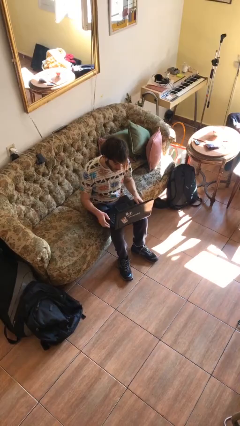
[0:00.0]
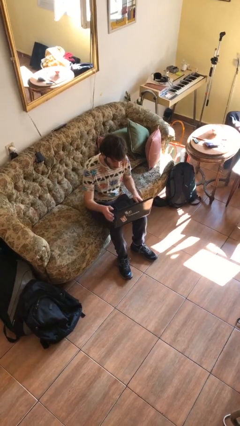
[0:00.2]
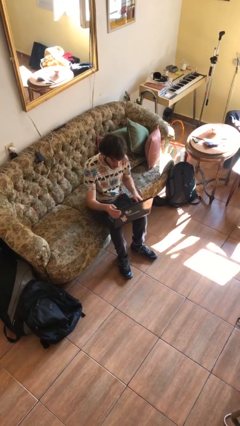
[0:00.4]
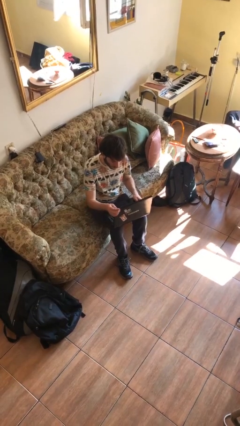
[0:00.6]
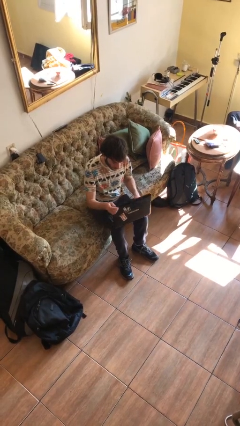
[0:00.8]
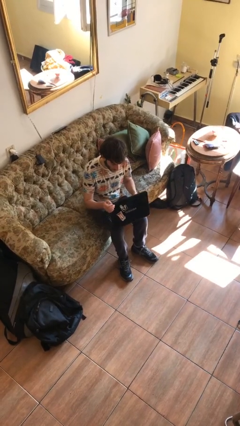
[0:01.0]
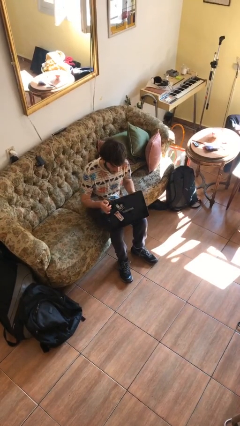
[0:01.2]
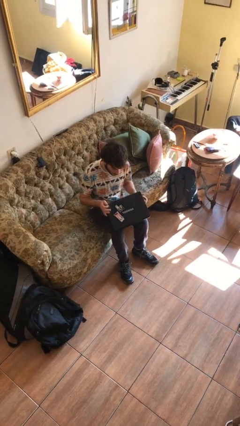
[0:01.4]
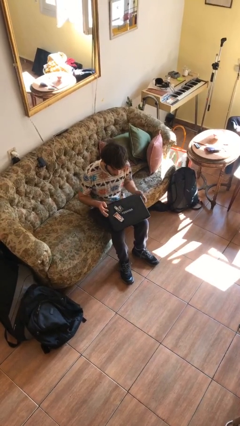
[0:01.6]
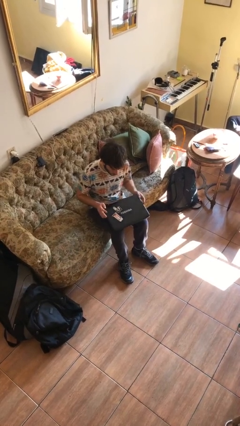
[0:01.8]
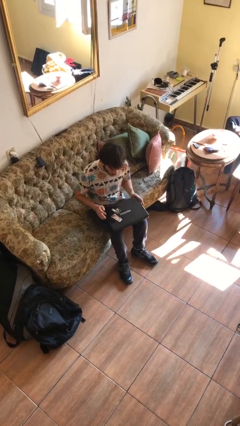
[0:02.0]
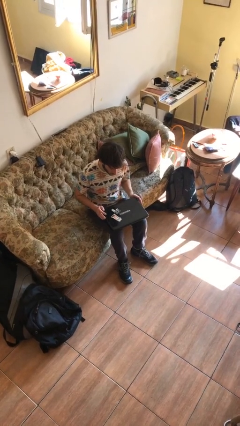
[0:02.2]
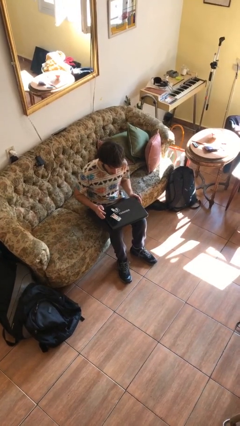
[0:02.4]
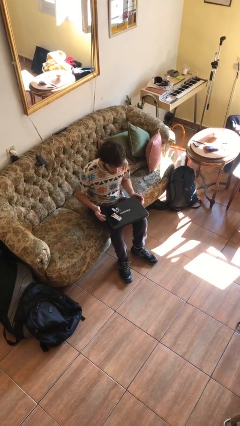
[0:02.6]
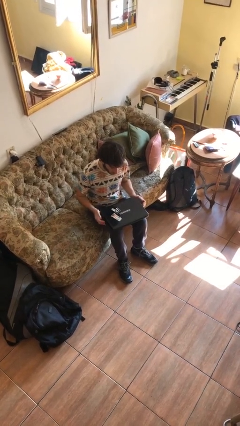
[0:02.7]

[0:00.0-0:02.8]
person closes laptop

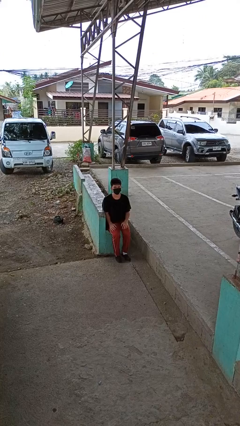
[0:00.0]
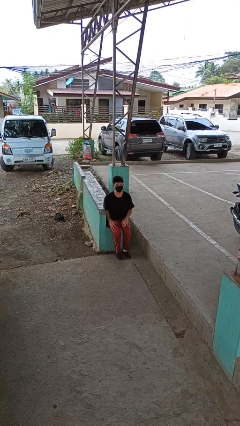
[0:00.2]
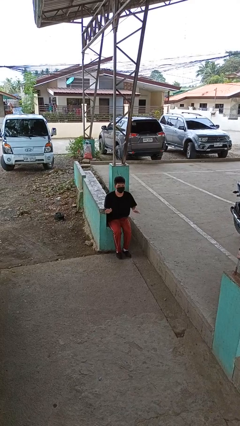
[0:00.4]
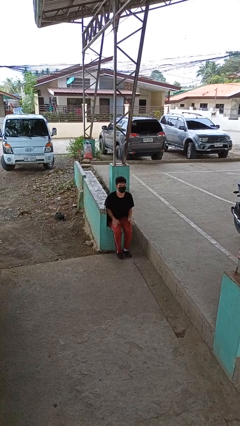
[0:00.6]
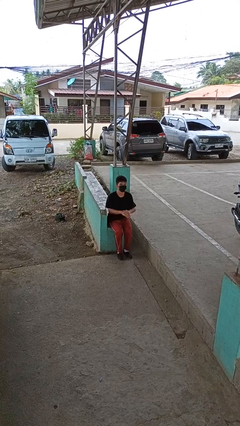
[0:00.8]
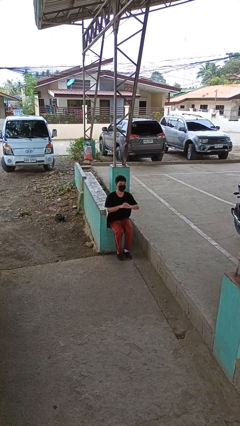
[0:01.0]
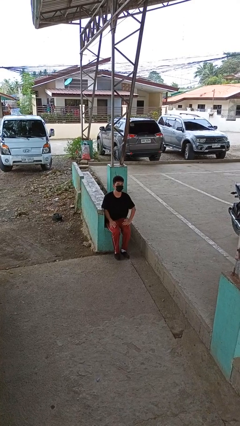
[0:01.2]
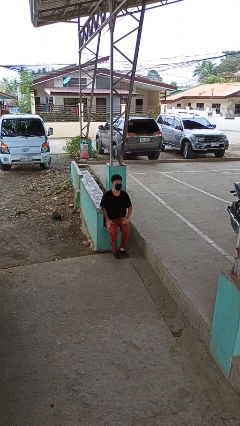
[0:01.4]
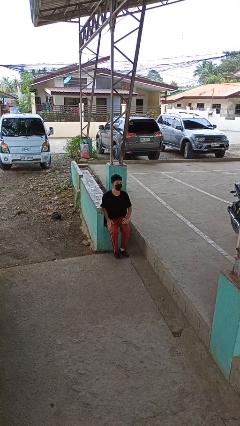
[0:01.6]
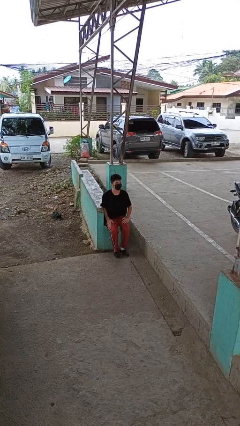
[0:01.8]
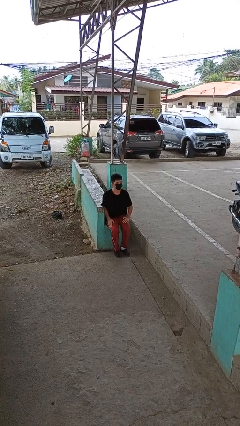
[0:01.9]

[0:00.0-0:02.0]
person slaps hands on thighs

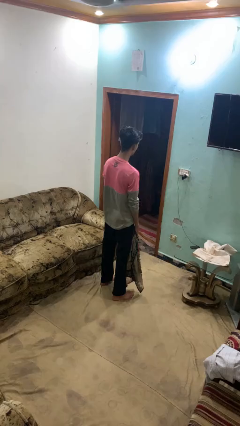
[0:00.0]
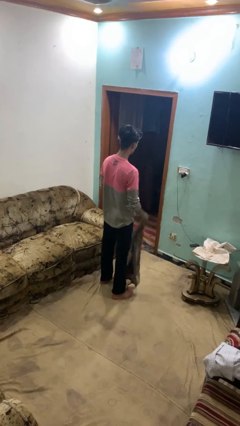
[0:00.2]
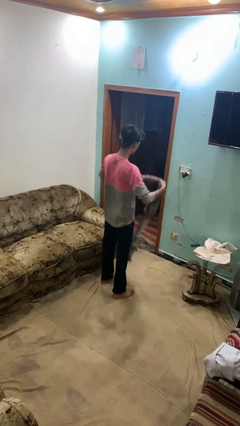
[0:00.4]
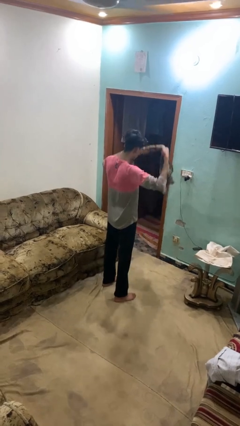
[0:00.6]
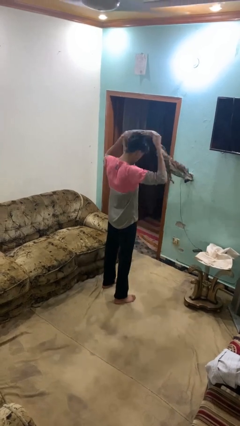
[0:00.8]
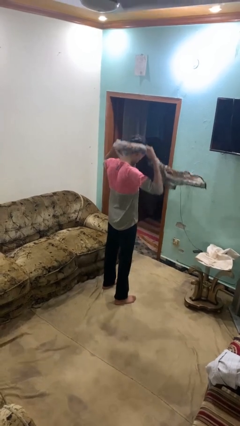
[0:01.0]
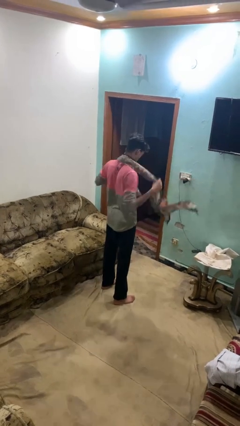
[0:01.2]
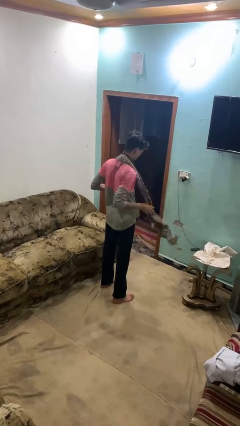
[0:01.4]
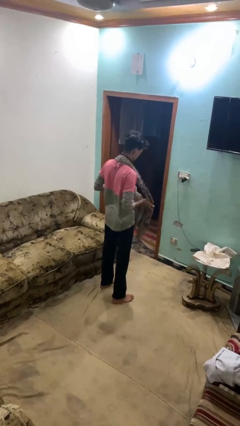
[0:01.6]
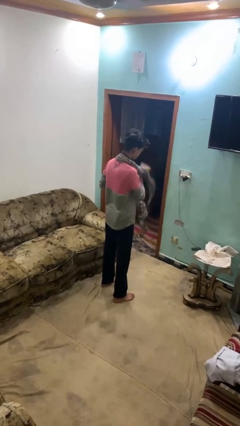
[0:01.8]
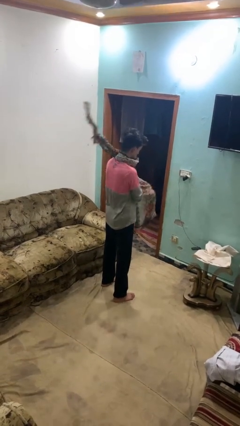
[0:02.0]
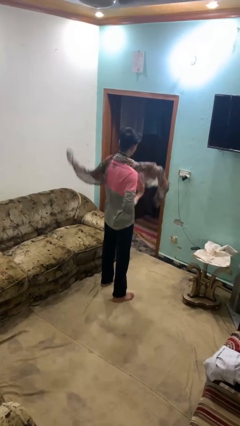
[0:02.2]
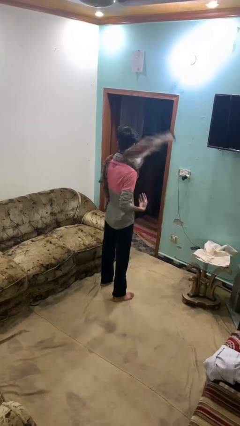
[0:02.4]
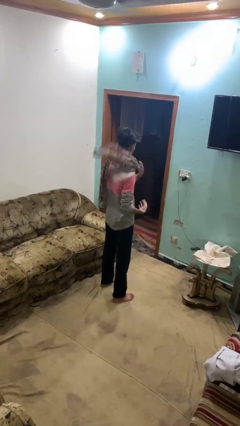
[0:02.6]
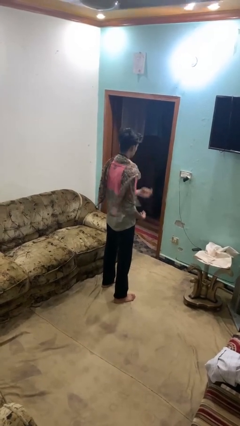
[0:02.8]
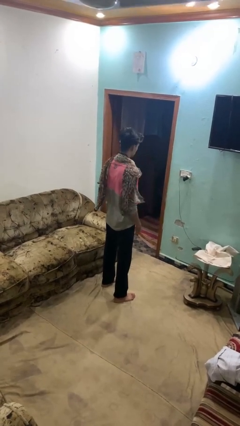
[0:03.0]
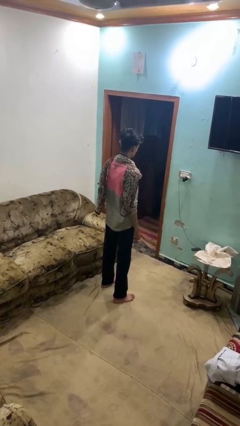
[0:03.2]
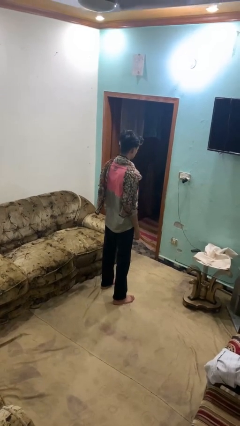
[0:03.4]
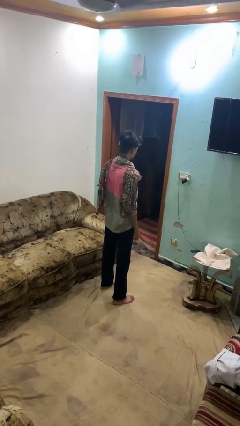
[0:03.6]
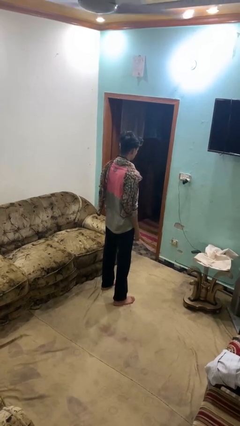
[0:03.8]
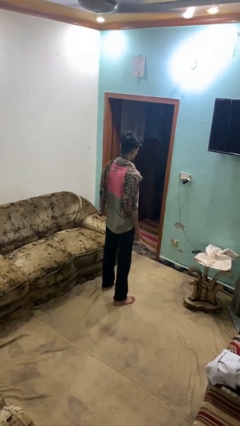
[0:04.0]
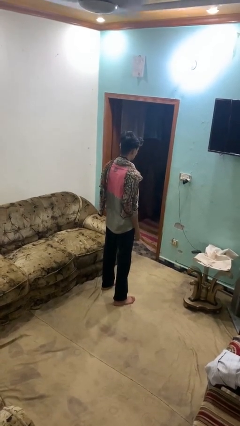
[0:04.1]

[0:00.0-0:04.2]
person puts on scarf

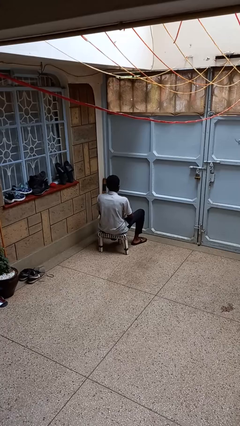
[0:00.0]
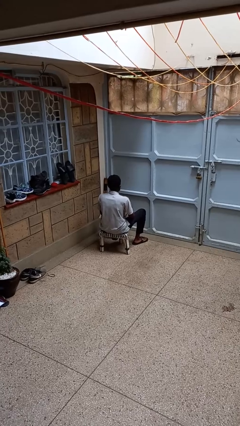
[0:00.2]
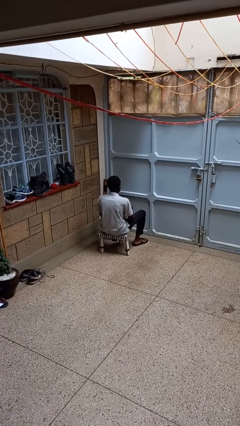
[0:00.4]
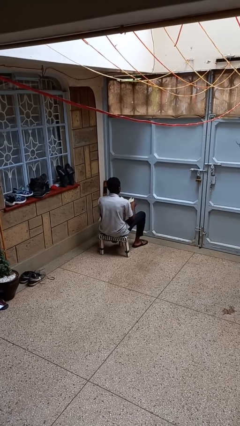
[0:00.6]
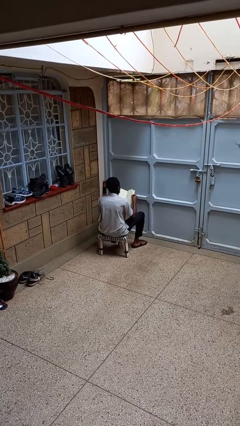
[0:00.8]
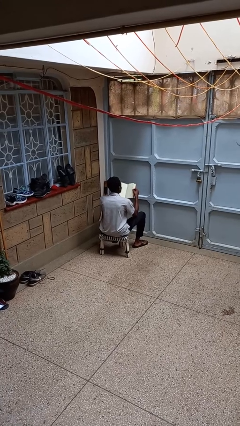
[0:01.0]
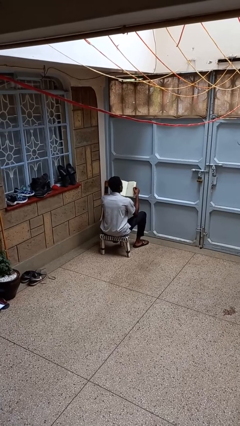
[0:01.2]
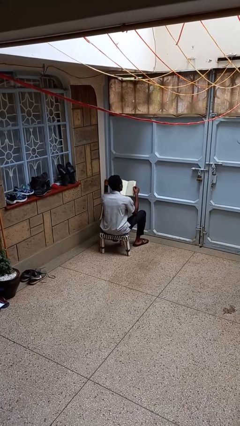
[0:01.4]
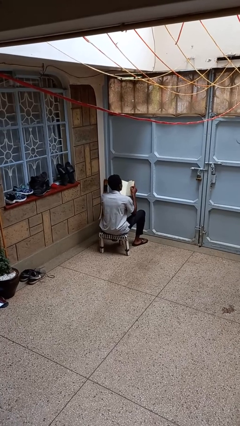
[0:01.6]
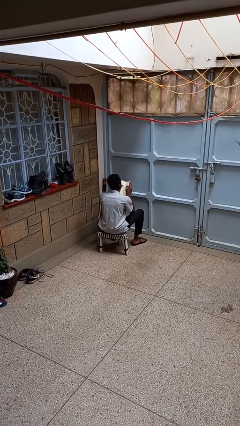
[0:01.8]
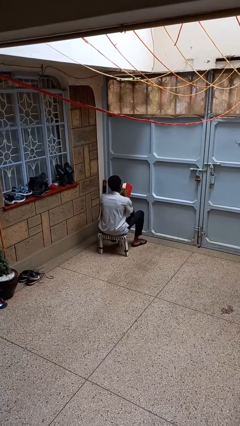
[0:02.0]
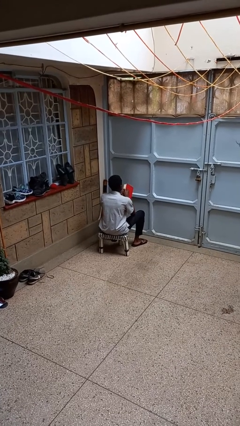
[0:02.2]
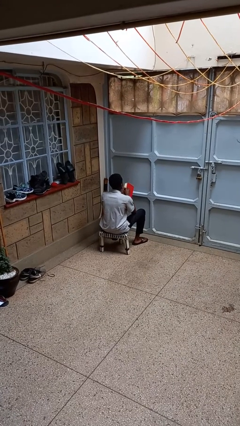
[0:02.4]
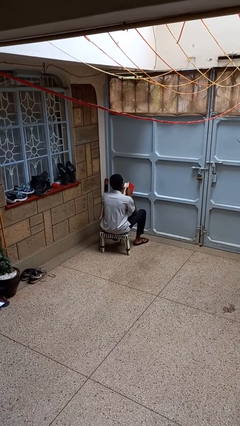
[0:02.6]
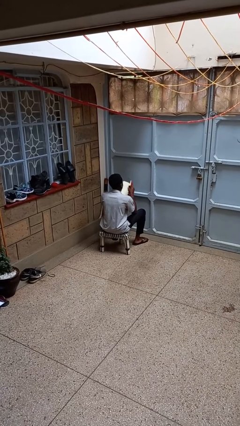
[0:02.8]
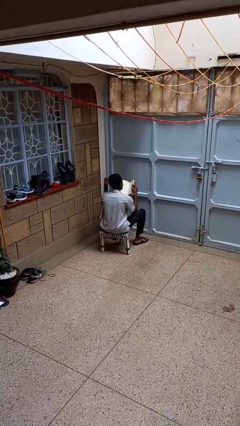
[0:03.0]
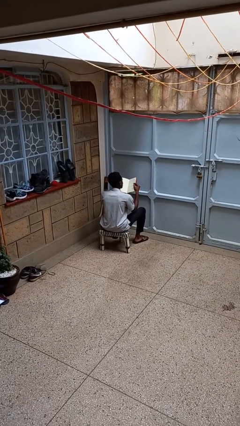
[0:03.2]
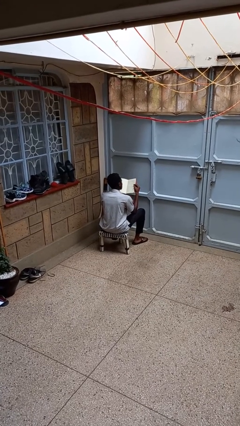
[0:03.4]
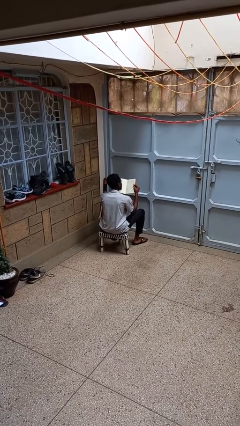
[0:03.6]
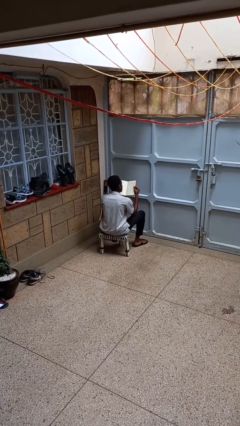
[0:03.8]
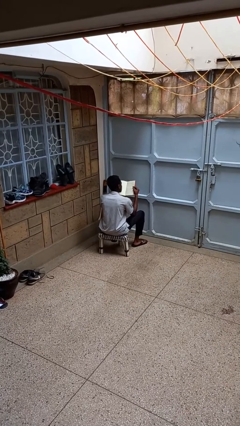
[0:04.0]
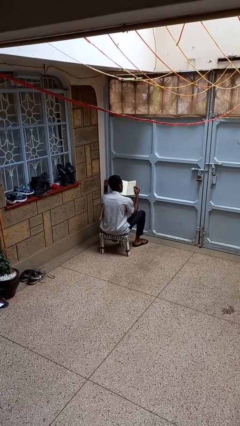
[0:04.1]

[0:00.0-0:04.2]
person reads book

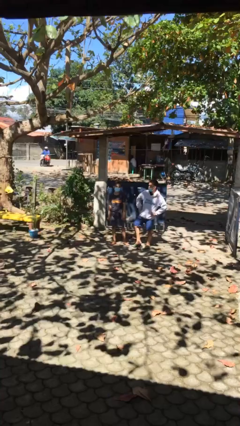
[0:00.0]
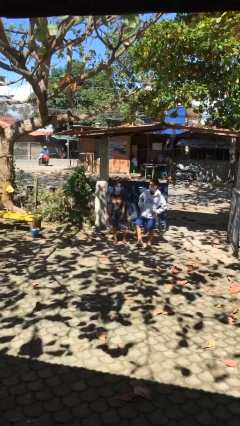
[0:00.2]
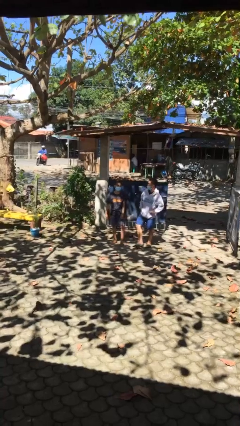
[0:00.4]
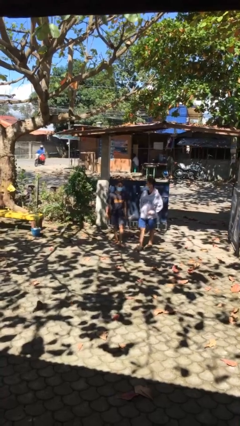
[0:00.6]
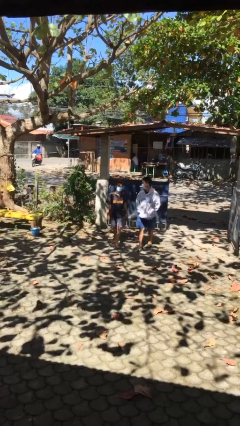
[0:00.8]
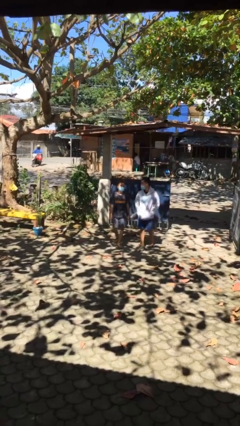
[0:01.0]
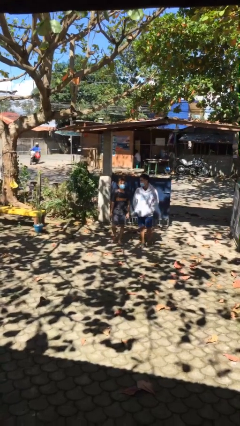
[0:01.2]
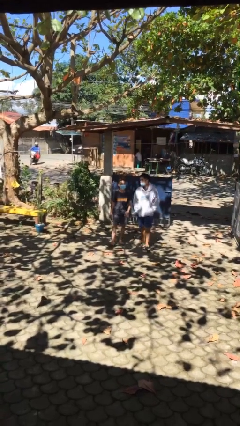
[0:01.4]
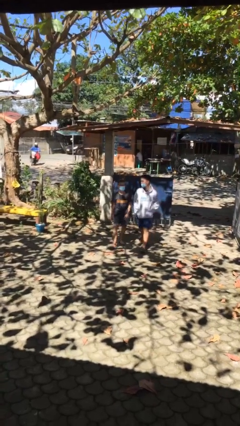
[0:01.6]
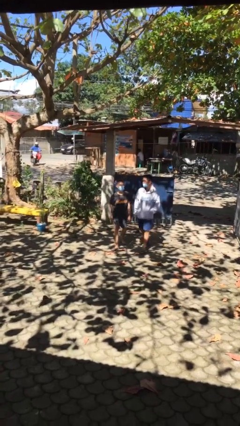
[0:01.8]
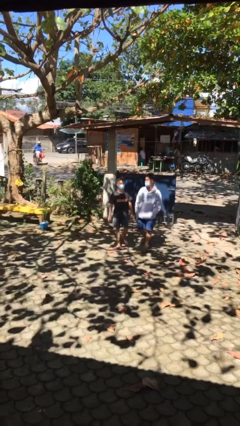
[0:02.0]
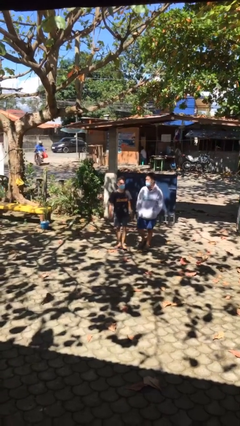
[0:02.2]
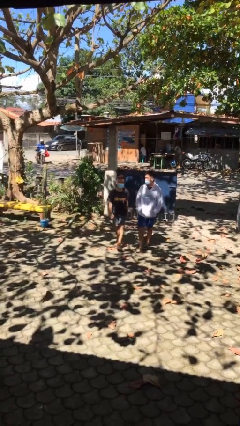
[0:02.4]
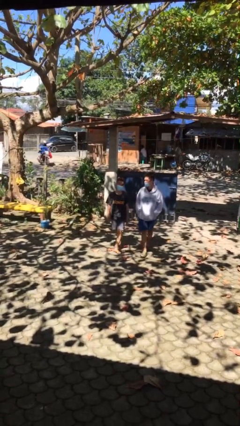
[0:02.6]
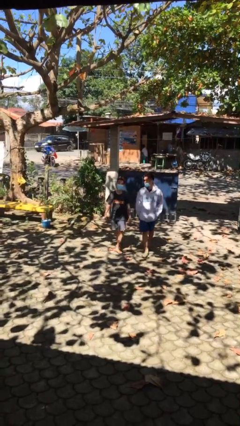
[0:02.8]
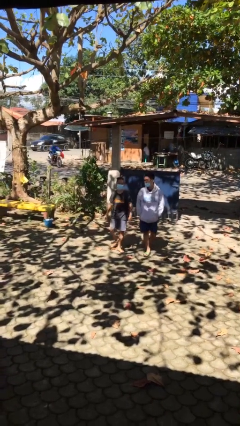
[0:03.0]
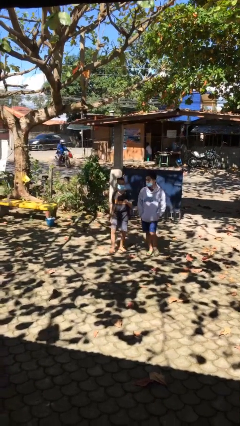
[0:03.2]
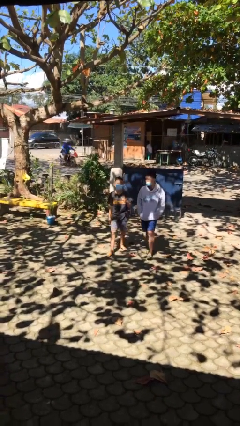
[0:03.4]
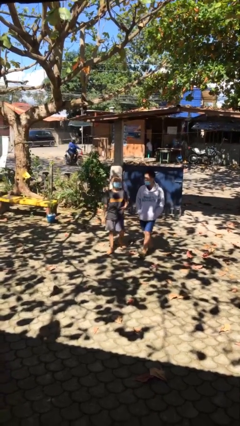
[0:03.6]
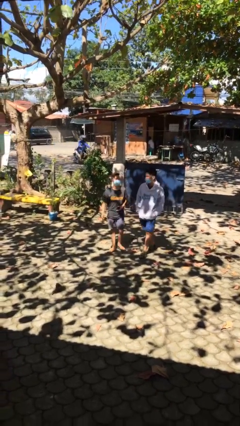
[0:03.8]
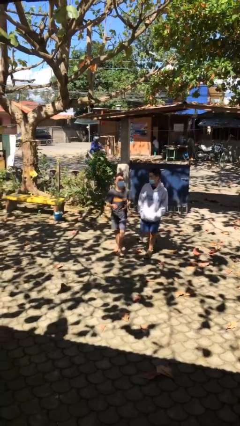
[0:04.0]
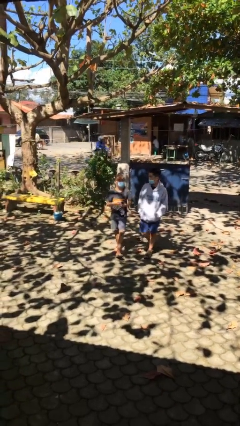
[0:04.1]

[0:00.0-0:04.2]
person talks to person
